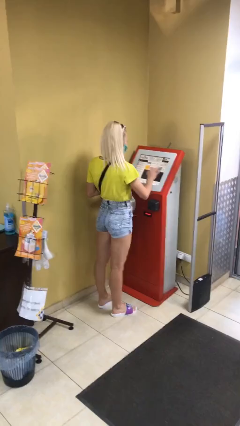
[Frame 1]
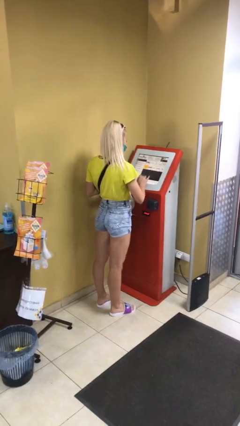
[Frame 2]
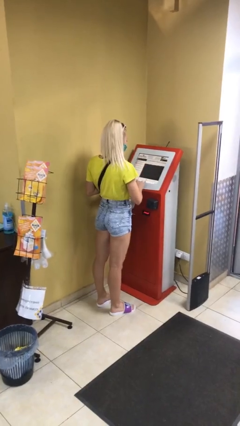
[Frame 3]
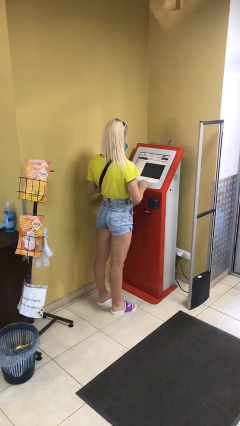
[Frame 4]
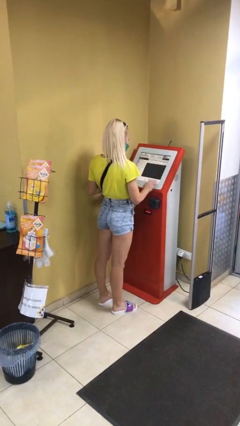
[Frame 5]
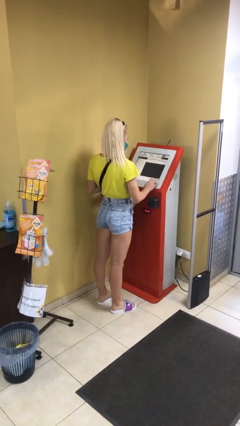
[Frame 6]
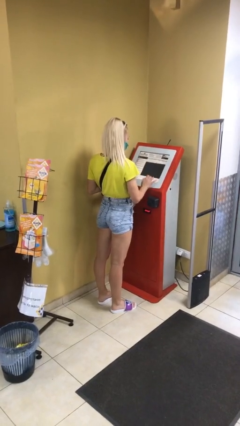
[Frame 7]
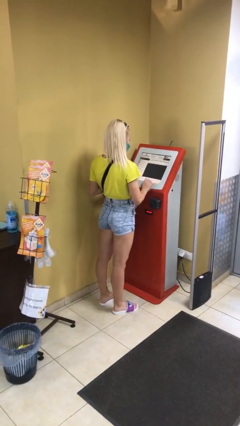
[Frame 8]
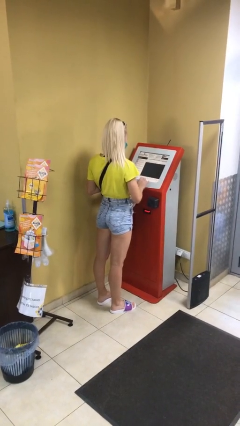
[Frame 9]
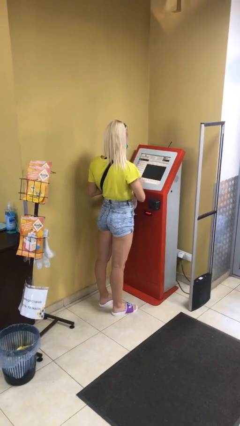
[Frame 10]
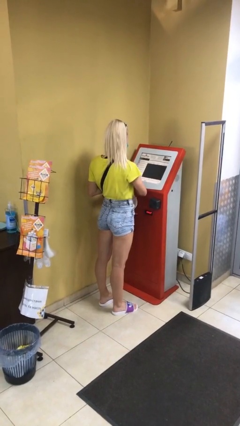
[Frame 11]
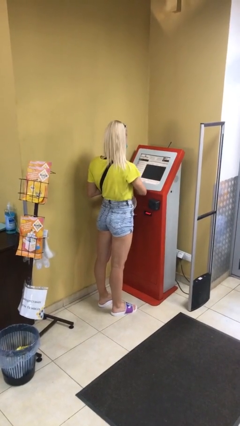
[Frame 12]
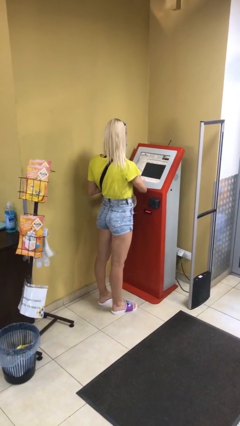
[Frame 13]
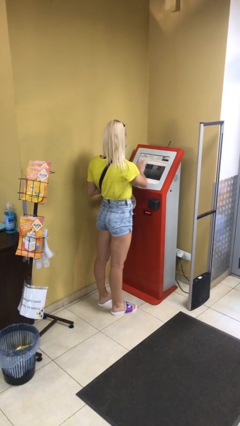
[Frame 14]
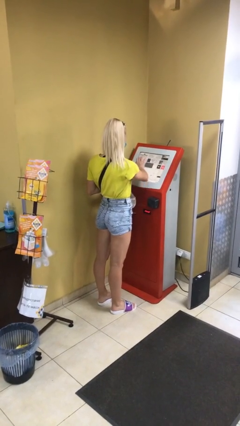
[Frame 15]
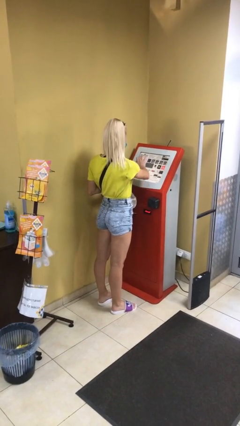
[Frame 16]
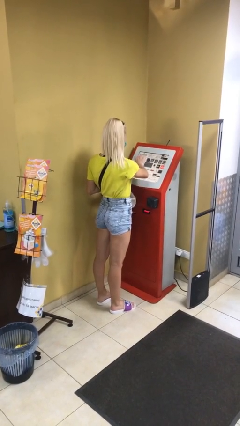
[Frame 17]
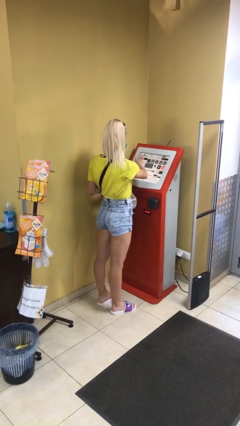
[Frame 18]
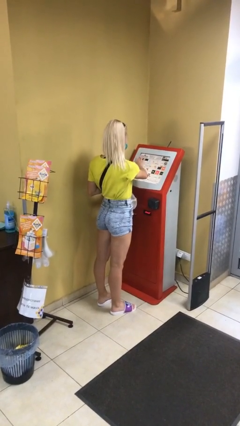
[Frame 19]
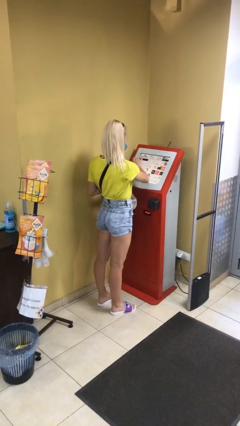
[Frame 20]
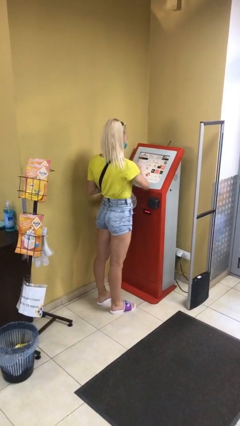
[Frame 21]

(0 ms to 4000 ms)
person purchases from machine

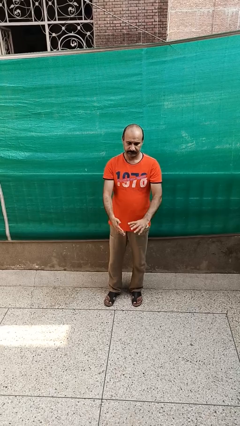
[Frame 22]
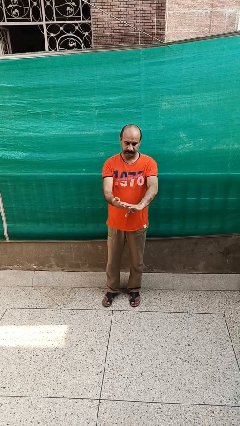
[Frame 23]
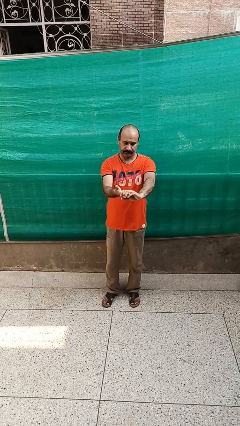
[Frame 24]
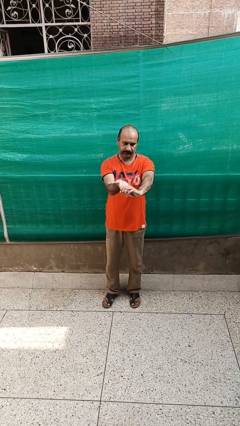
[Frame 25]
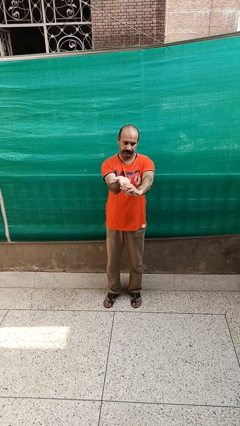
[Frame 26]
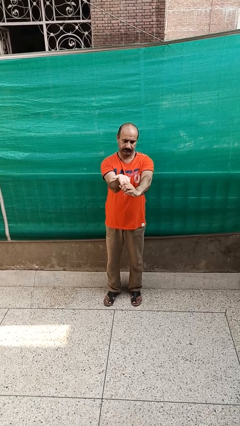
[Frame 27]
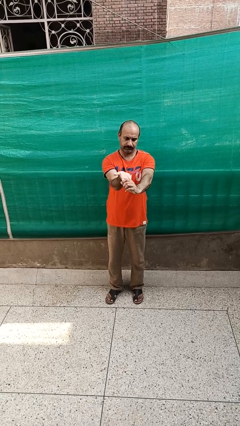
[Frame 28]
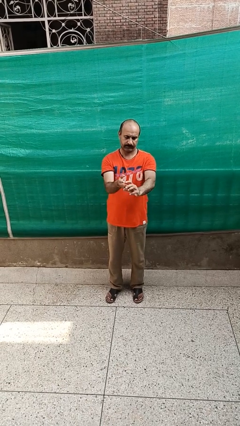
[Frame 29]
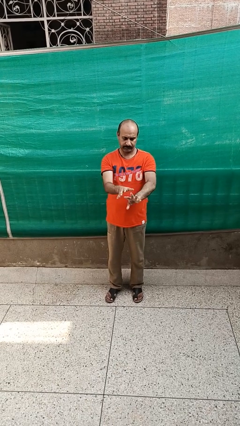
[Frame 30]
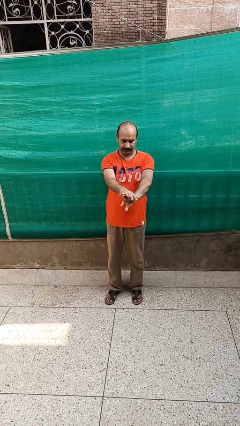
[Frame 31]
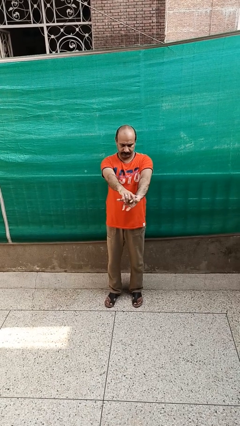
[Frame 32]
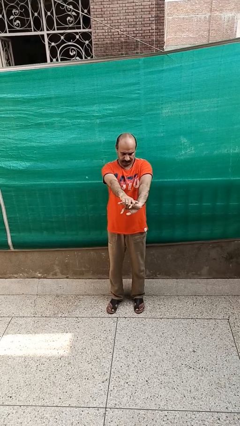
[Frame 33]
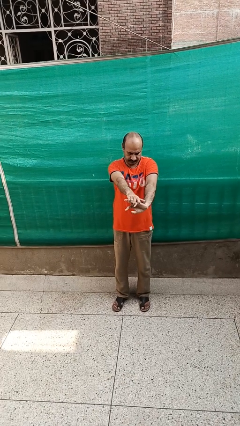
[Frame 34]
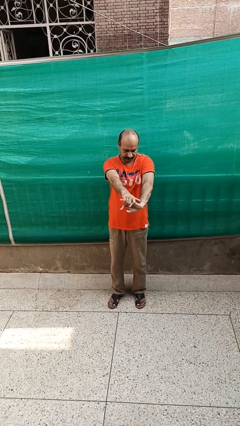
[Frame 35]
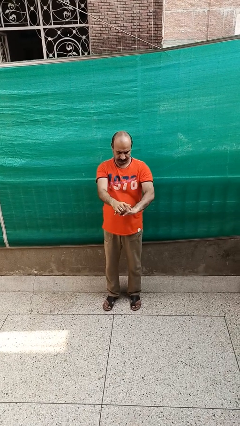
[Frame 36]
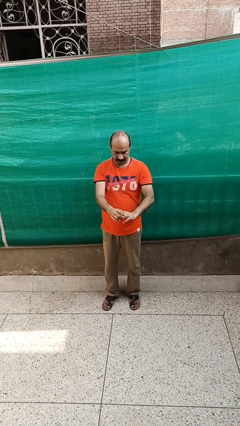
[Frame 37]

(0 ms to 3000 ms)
person cracks knuckles

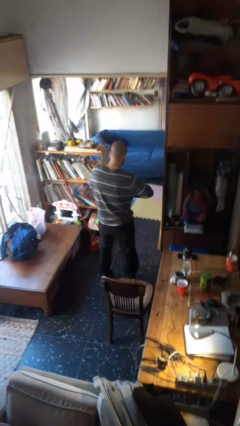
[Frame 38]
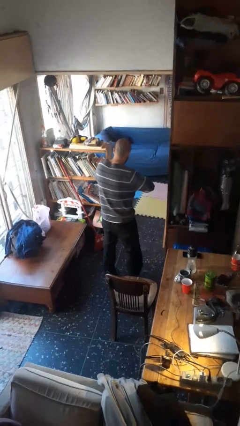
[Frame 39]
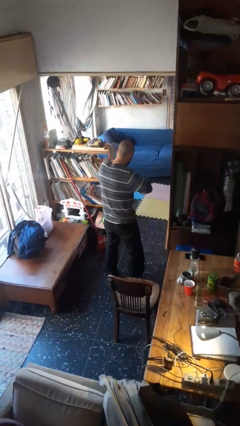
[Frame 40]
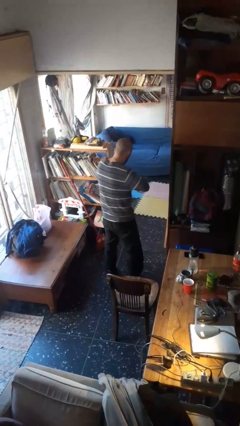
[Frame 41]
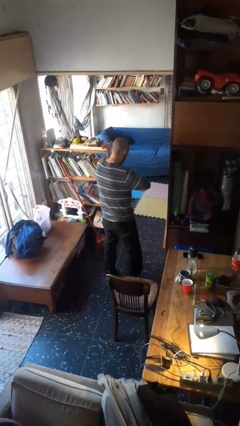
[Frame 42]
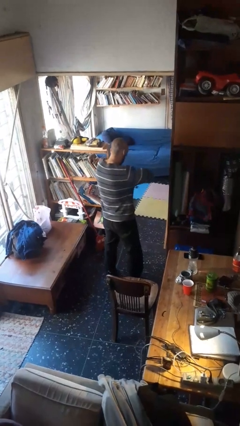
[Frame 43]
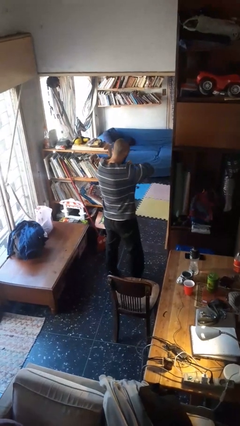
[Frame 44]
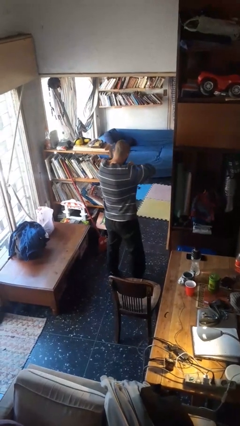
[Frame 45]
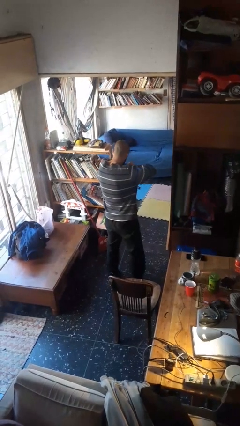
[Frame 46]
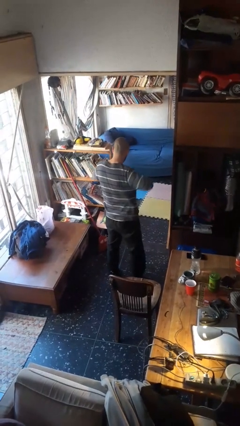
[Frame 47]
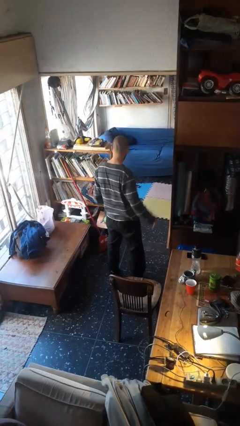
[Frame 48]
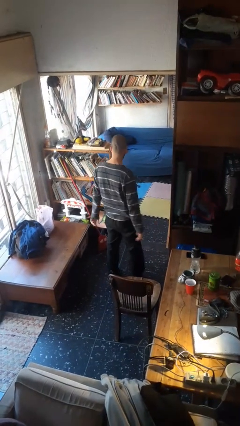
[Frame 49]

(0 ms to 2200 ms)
person snaps fingers

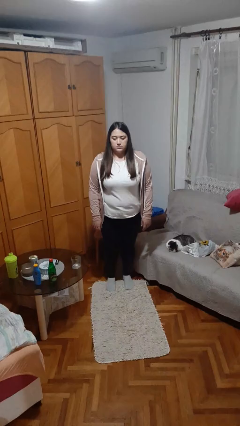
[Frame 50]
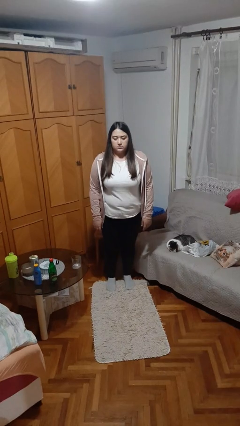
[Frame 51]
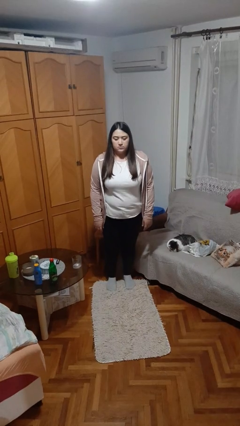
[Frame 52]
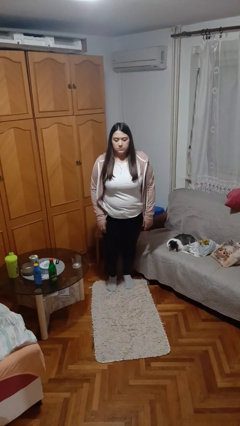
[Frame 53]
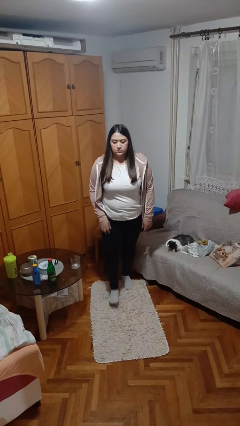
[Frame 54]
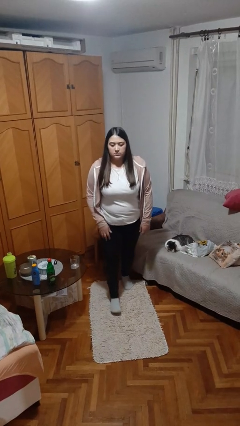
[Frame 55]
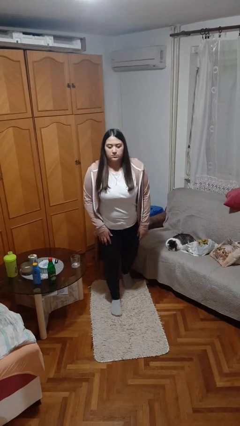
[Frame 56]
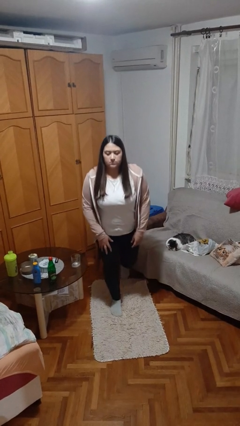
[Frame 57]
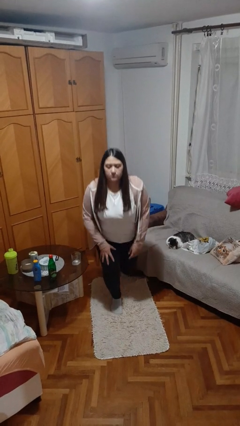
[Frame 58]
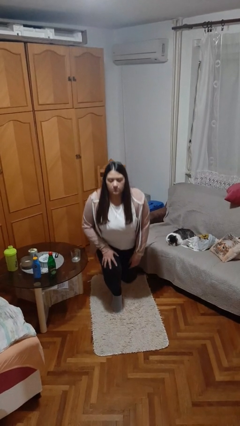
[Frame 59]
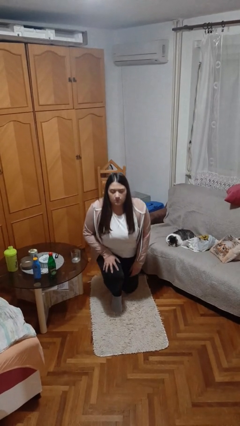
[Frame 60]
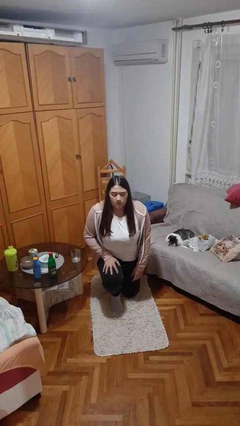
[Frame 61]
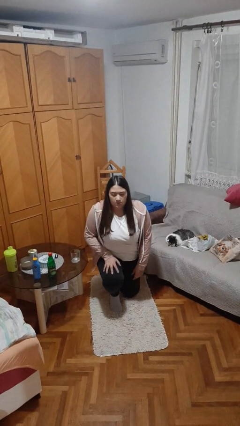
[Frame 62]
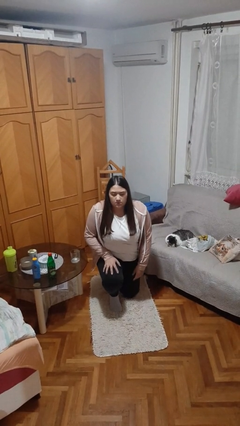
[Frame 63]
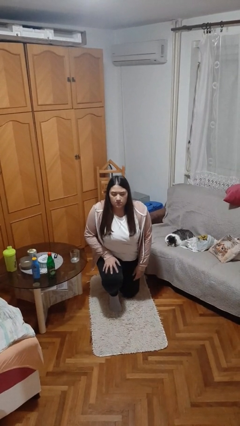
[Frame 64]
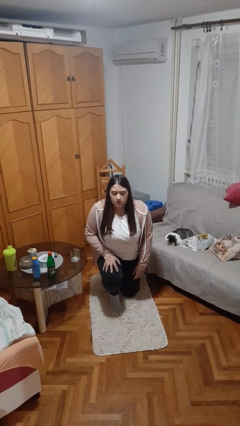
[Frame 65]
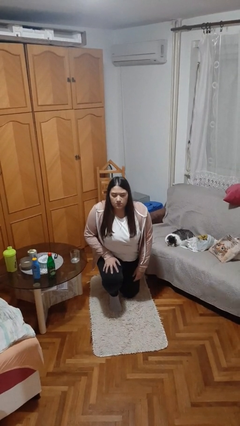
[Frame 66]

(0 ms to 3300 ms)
person kneels

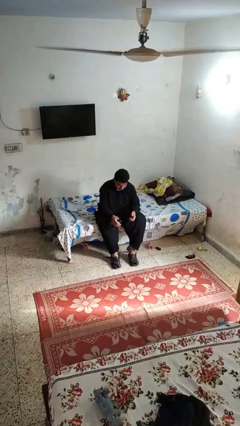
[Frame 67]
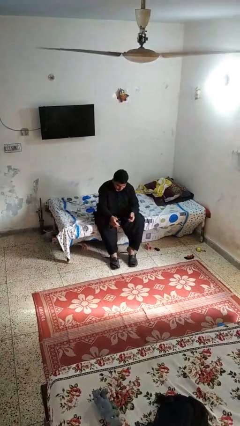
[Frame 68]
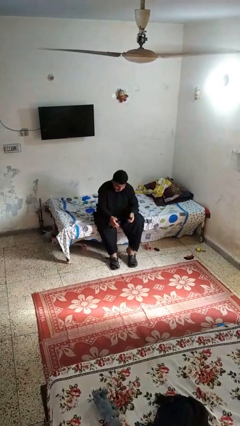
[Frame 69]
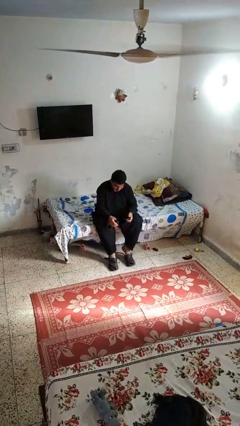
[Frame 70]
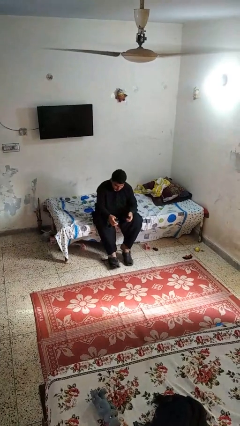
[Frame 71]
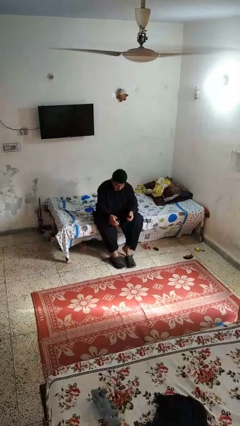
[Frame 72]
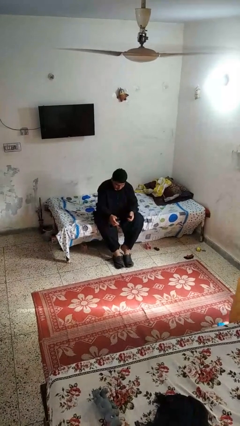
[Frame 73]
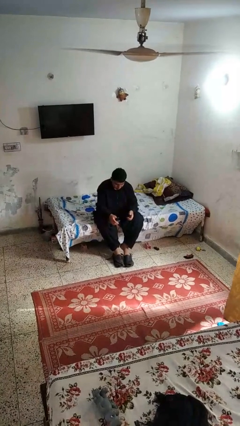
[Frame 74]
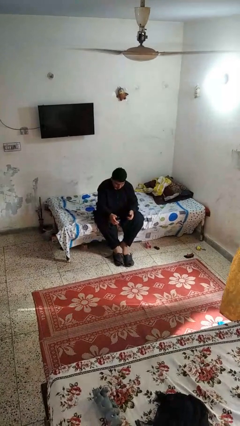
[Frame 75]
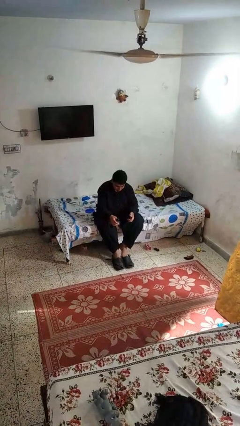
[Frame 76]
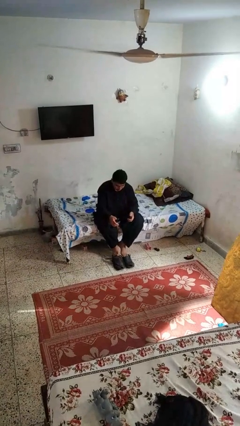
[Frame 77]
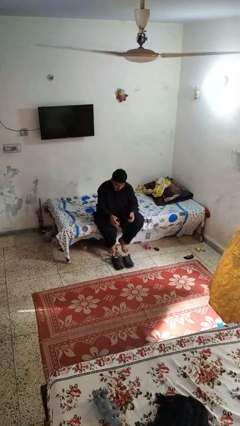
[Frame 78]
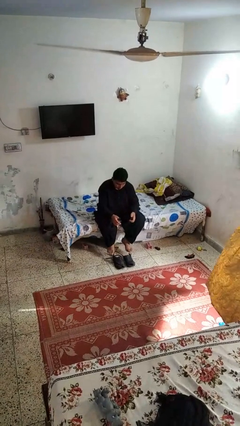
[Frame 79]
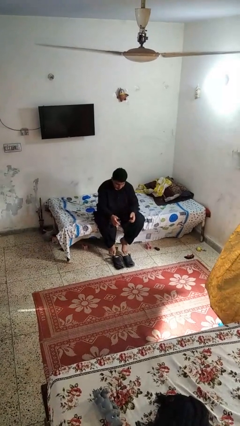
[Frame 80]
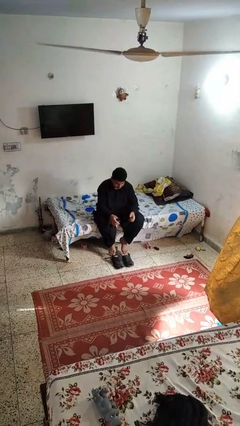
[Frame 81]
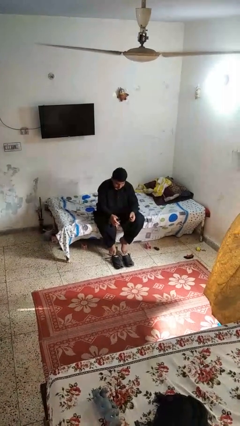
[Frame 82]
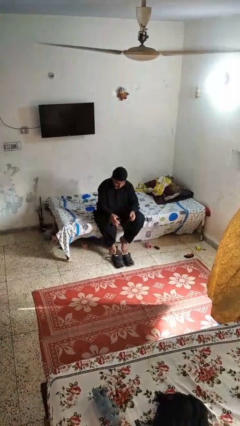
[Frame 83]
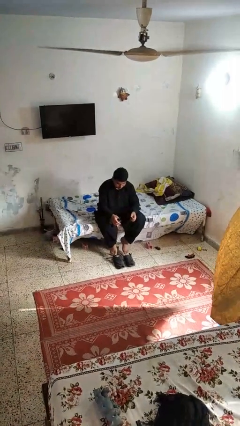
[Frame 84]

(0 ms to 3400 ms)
person takes off shoes

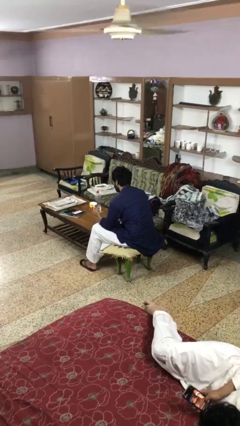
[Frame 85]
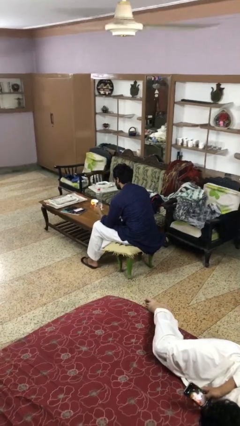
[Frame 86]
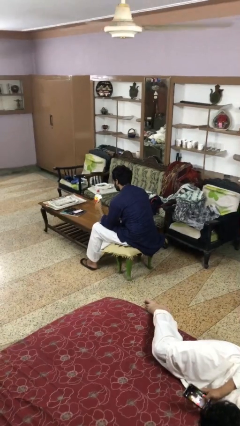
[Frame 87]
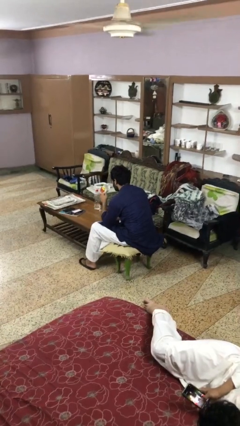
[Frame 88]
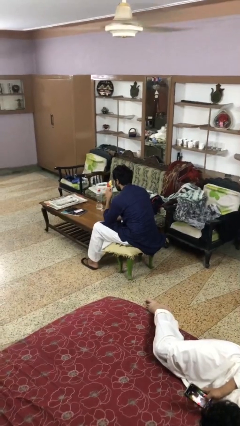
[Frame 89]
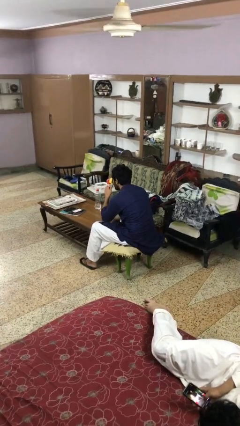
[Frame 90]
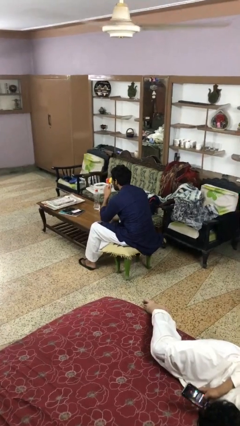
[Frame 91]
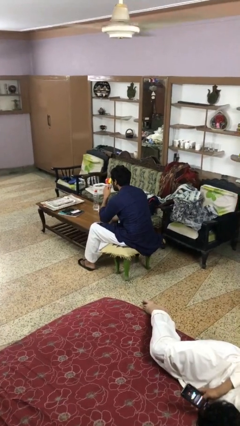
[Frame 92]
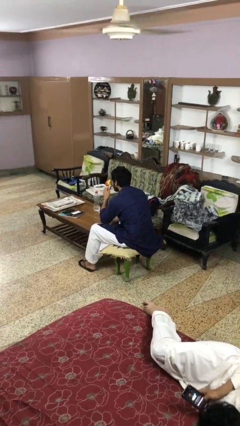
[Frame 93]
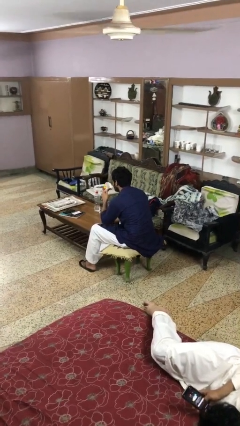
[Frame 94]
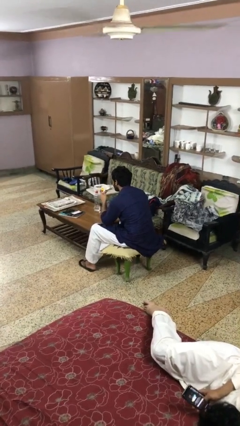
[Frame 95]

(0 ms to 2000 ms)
person drinks from mug
